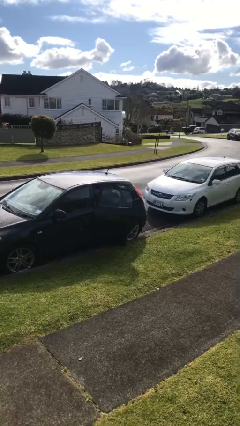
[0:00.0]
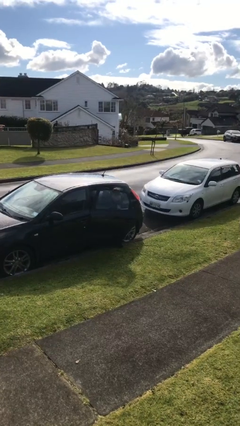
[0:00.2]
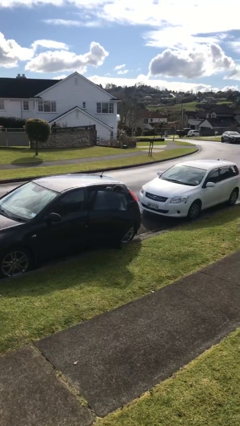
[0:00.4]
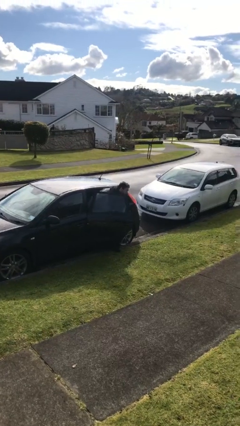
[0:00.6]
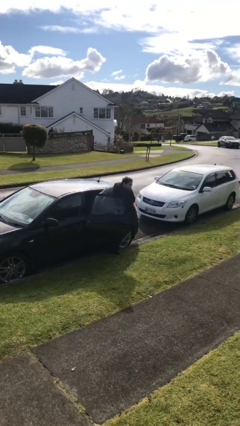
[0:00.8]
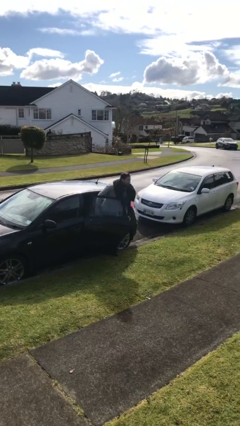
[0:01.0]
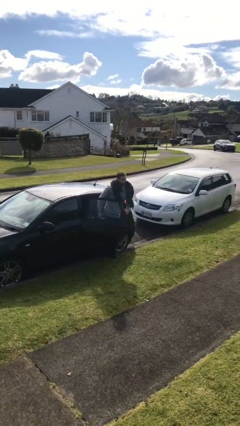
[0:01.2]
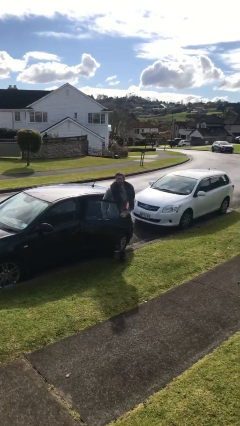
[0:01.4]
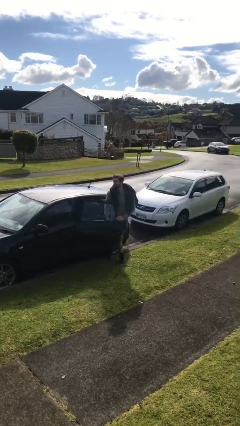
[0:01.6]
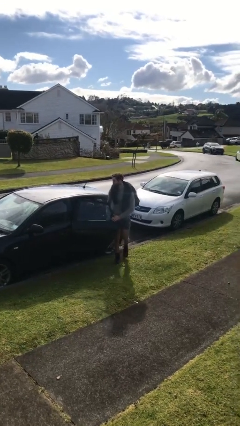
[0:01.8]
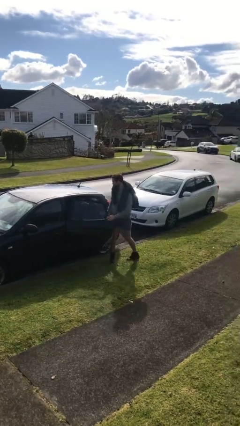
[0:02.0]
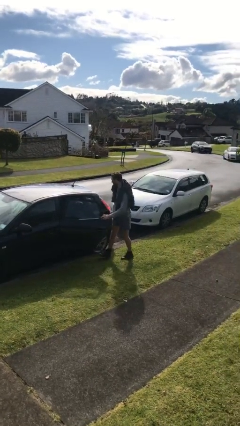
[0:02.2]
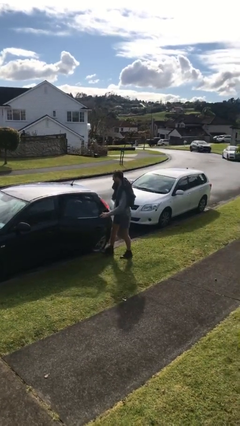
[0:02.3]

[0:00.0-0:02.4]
person exits car

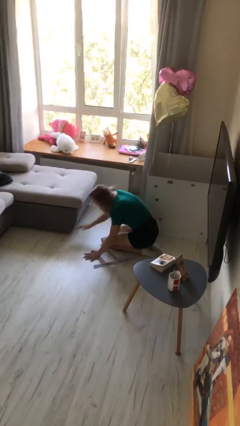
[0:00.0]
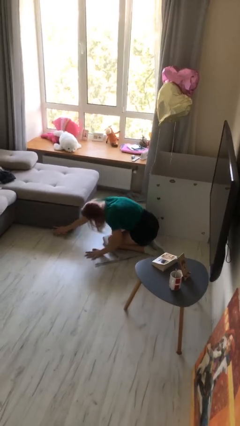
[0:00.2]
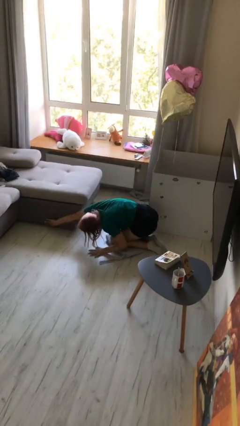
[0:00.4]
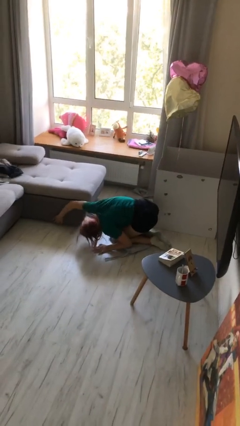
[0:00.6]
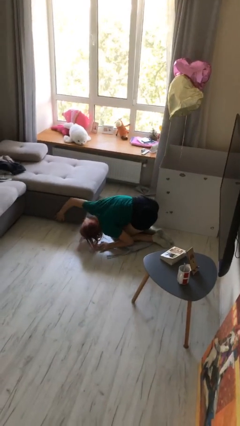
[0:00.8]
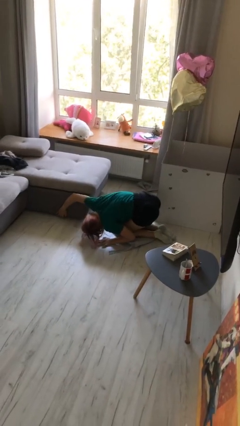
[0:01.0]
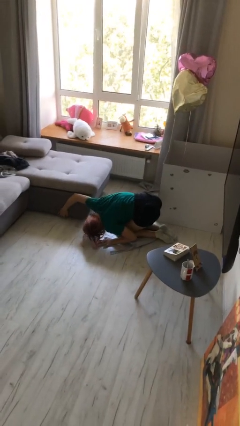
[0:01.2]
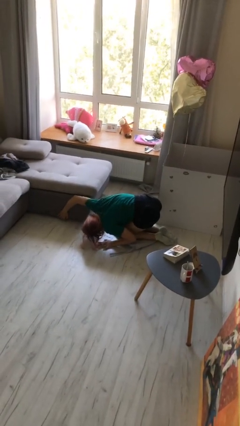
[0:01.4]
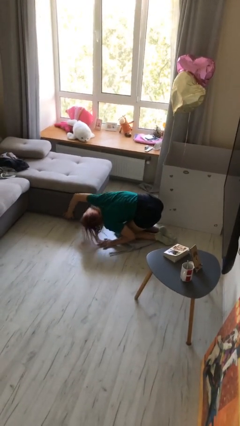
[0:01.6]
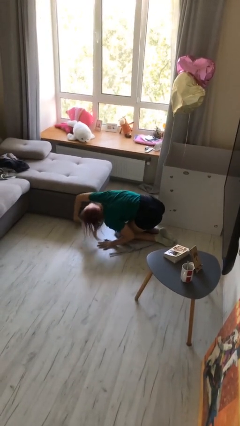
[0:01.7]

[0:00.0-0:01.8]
person searches under bed

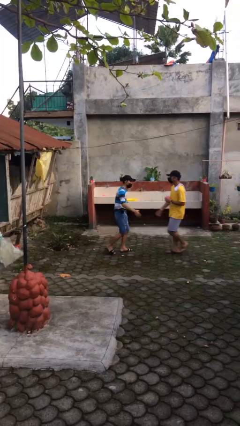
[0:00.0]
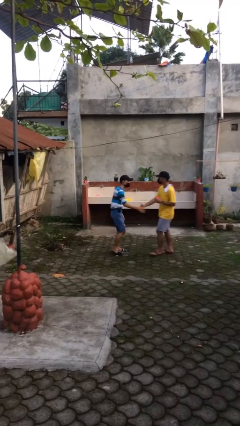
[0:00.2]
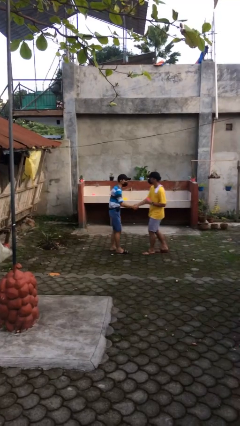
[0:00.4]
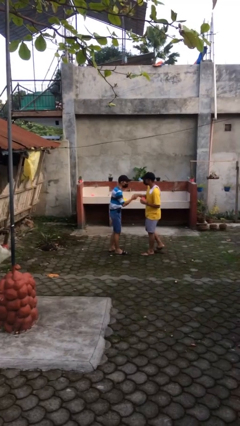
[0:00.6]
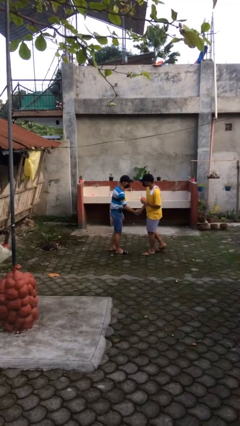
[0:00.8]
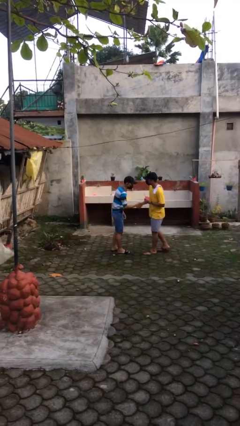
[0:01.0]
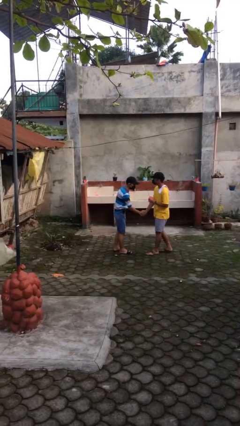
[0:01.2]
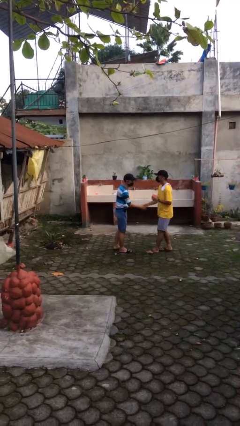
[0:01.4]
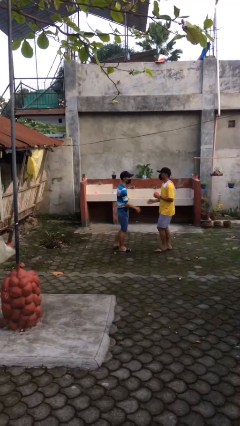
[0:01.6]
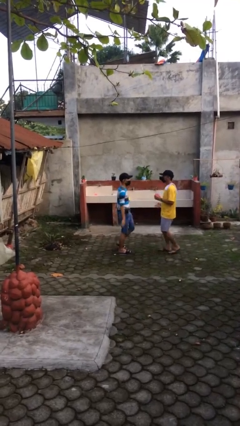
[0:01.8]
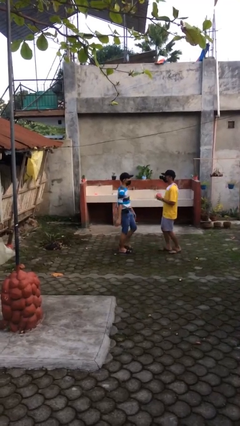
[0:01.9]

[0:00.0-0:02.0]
person shakes hand

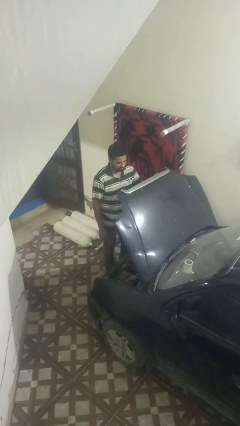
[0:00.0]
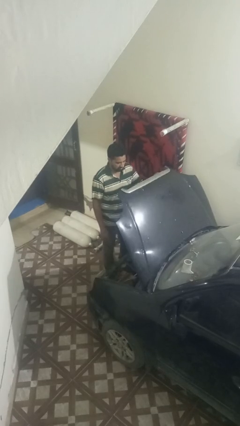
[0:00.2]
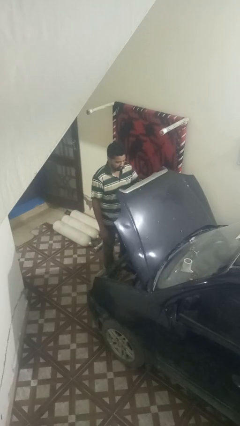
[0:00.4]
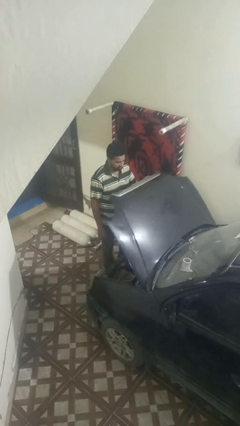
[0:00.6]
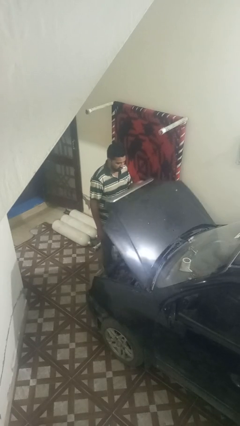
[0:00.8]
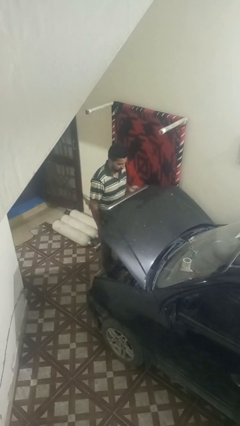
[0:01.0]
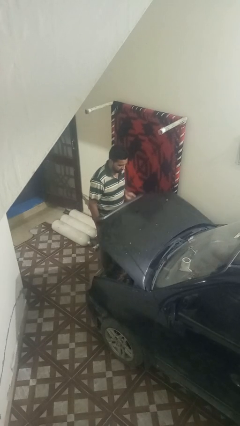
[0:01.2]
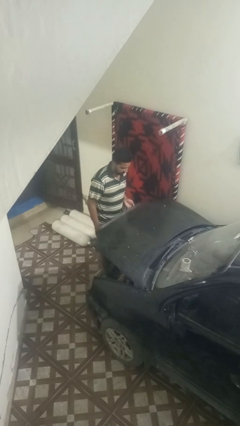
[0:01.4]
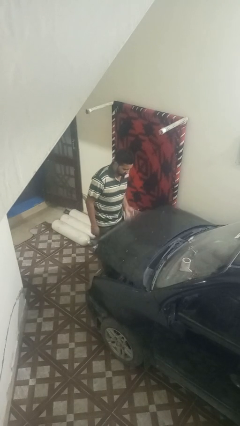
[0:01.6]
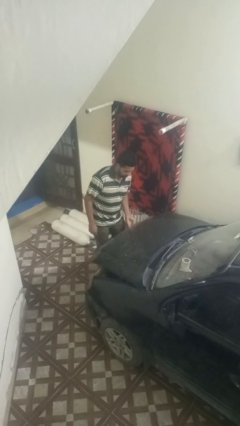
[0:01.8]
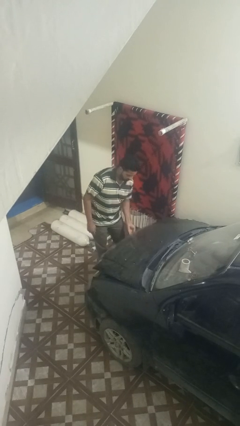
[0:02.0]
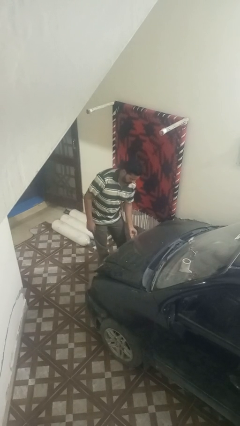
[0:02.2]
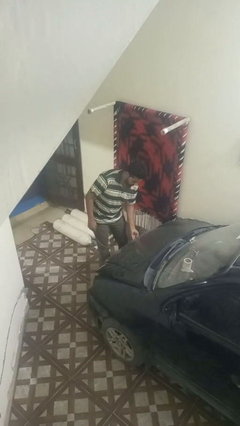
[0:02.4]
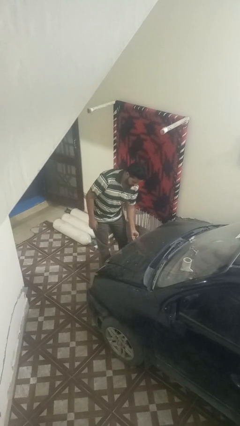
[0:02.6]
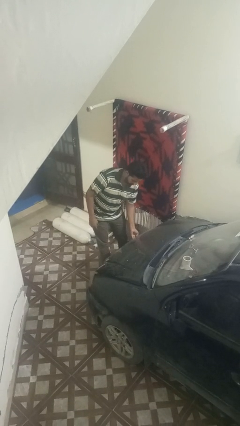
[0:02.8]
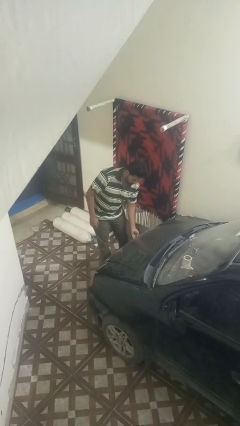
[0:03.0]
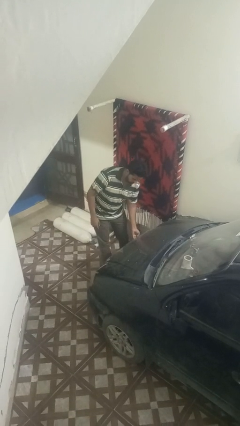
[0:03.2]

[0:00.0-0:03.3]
person closes car hood

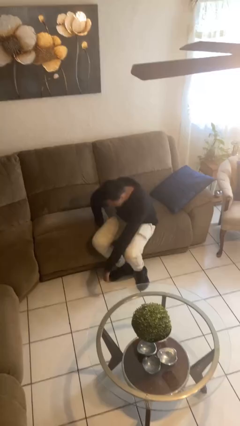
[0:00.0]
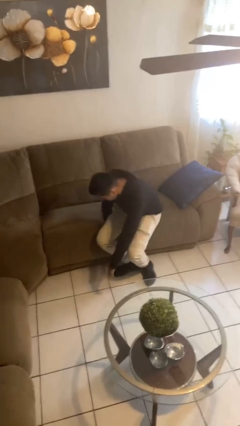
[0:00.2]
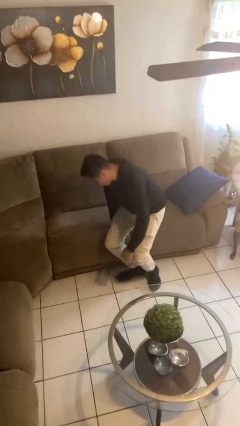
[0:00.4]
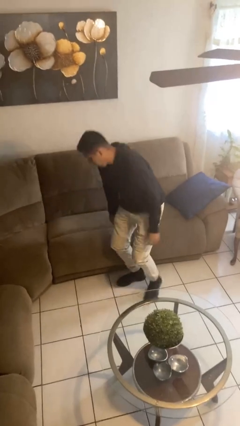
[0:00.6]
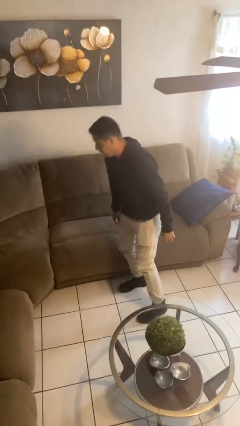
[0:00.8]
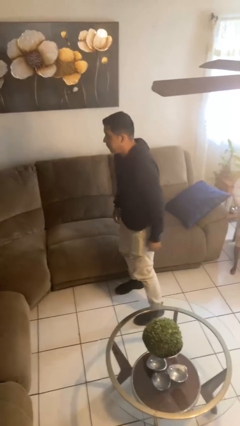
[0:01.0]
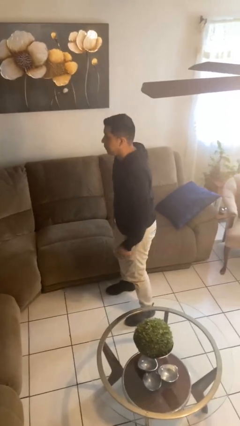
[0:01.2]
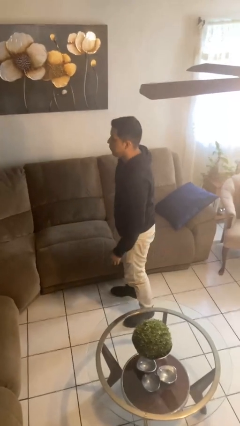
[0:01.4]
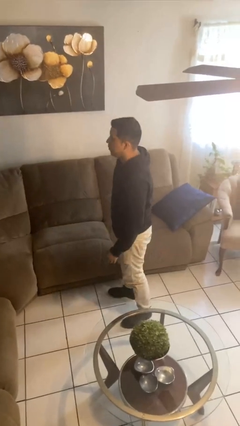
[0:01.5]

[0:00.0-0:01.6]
person stands up

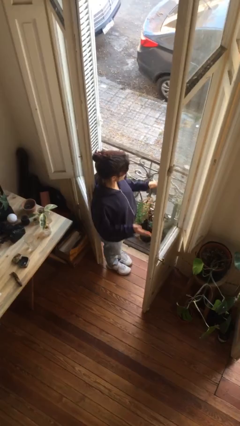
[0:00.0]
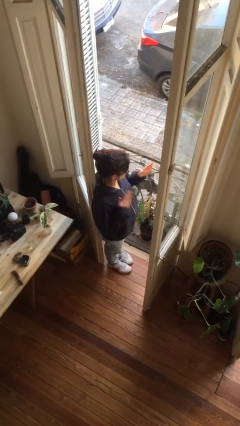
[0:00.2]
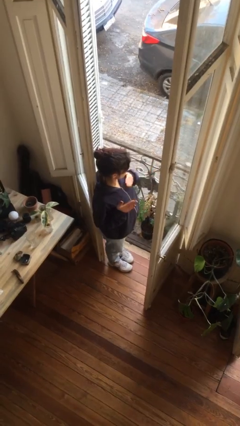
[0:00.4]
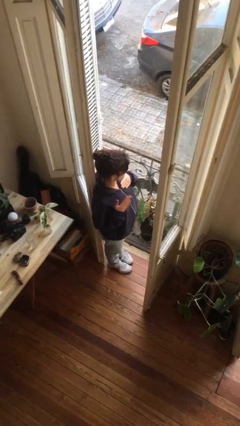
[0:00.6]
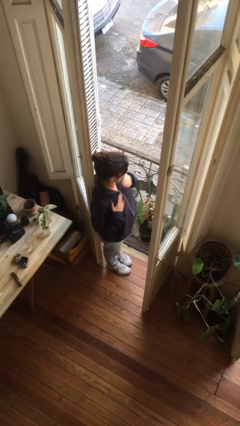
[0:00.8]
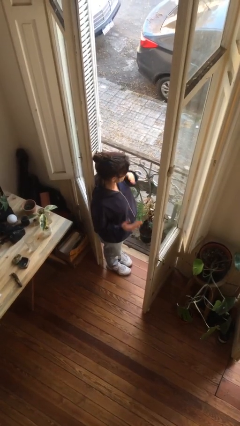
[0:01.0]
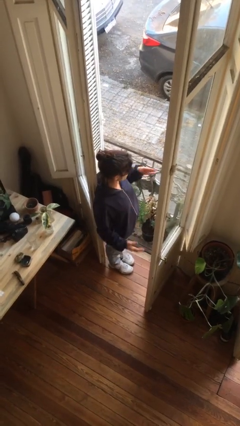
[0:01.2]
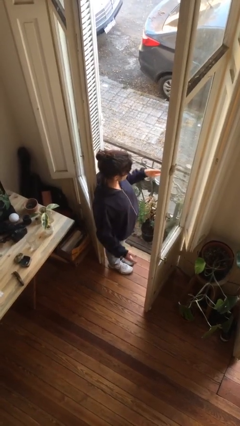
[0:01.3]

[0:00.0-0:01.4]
person drums on chest

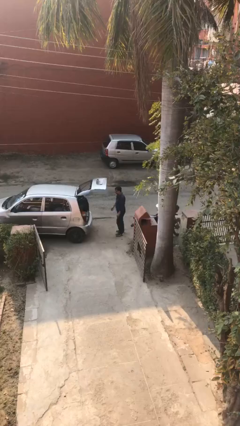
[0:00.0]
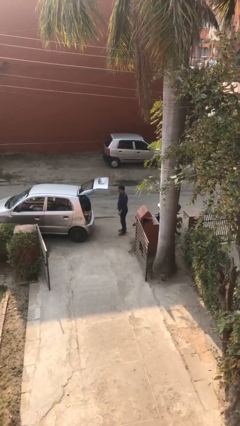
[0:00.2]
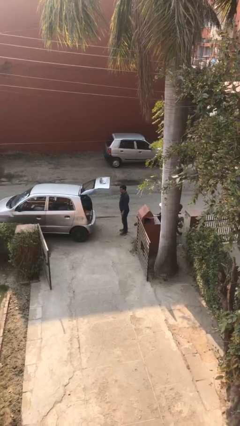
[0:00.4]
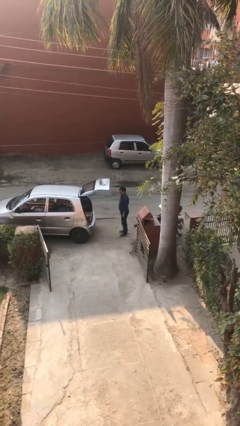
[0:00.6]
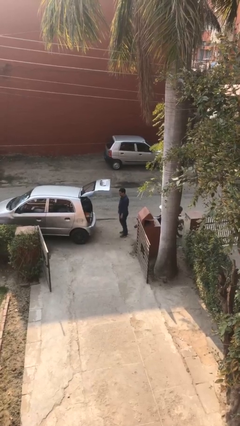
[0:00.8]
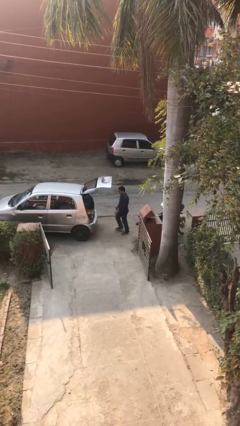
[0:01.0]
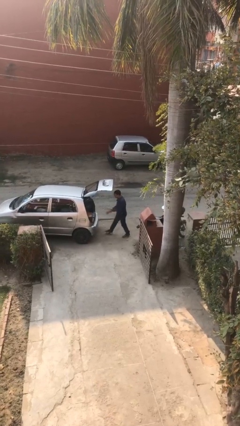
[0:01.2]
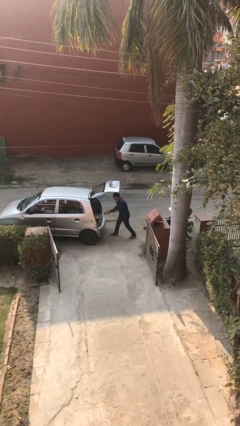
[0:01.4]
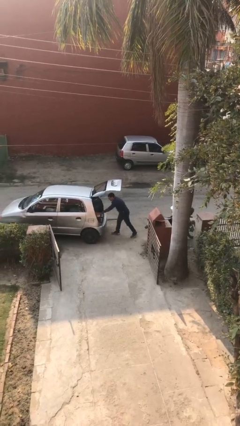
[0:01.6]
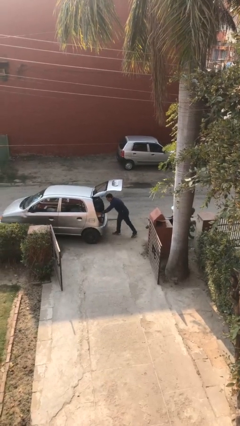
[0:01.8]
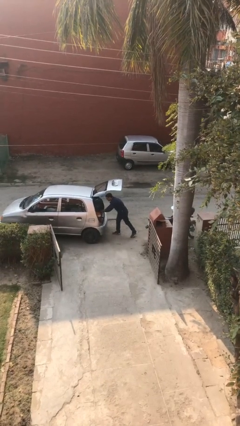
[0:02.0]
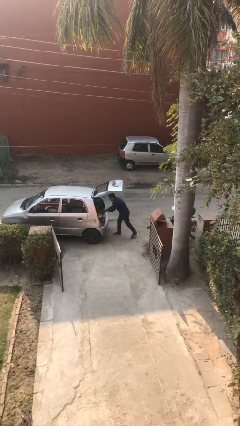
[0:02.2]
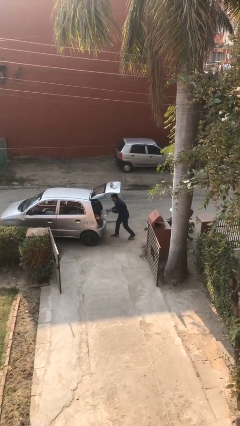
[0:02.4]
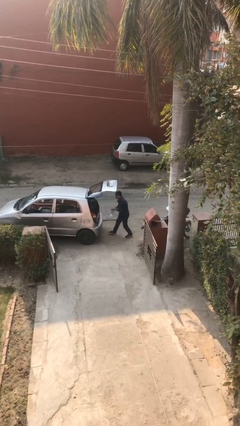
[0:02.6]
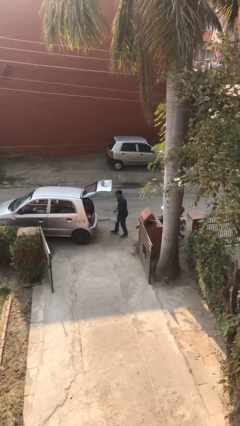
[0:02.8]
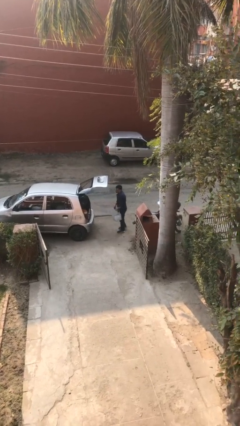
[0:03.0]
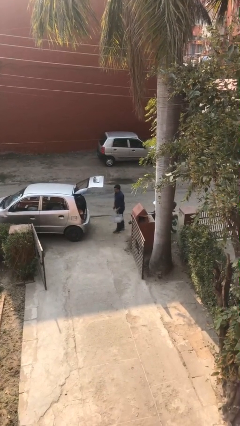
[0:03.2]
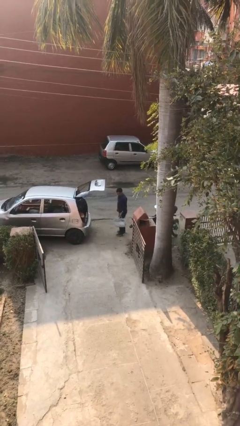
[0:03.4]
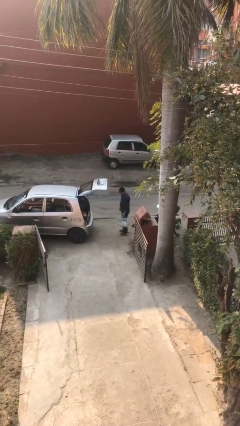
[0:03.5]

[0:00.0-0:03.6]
person unloads car

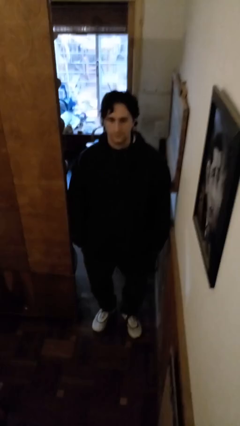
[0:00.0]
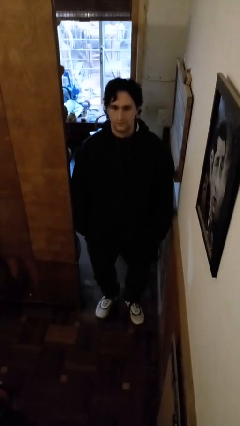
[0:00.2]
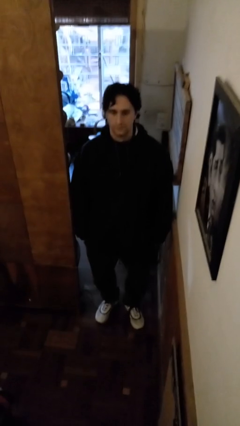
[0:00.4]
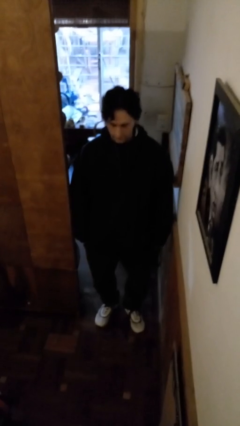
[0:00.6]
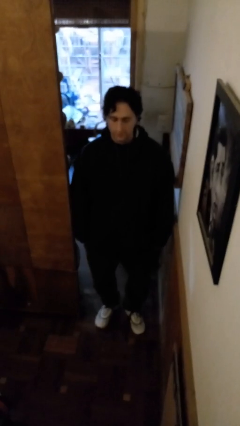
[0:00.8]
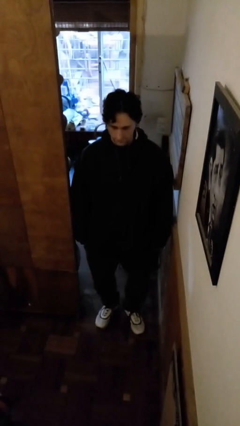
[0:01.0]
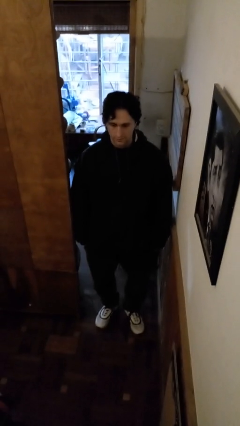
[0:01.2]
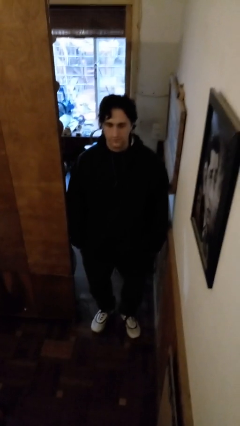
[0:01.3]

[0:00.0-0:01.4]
person nods head
